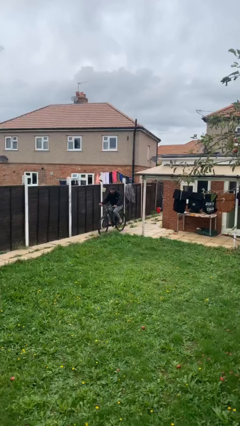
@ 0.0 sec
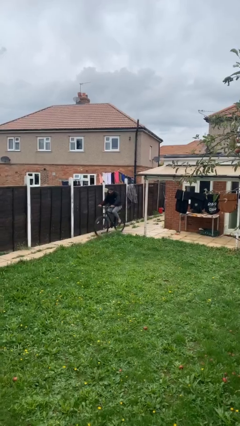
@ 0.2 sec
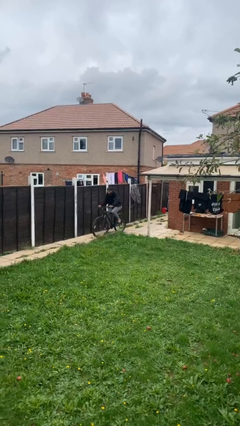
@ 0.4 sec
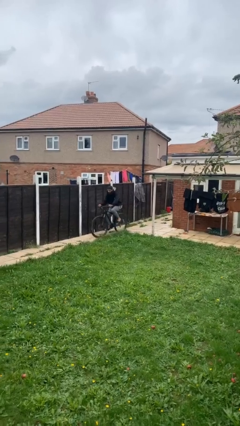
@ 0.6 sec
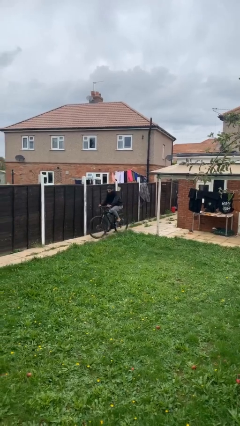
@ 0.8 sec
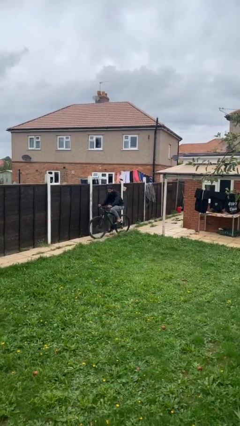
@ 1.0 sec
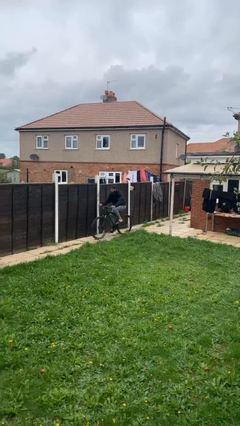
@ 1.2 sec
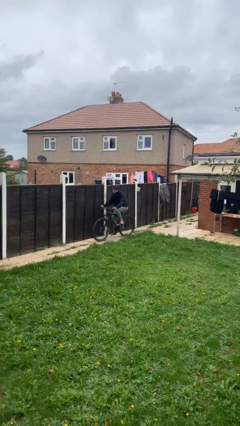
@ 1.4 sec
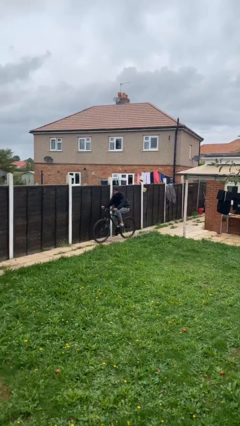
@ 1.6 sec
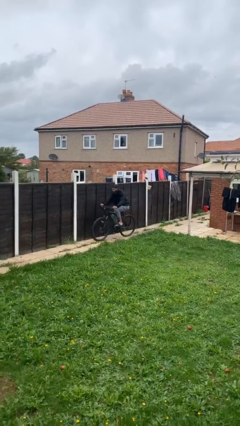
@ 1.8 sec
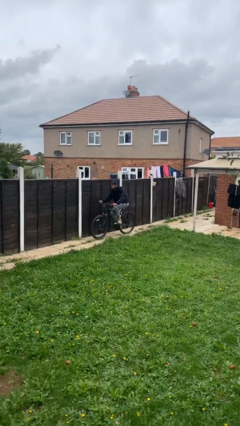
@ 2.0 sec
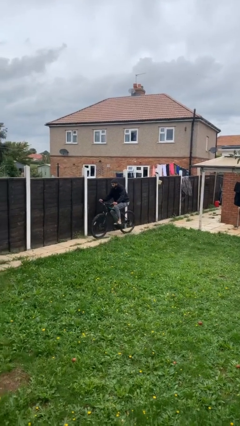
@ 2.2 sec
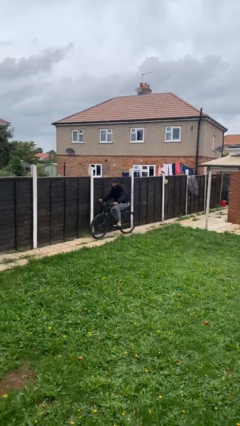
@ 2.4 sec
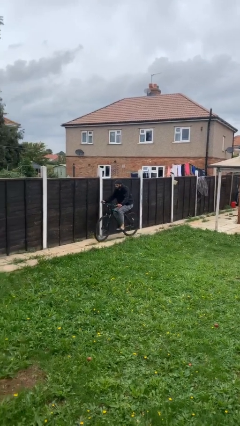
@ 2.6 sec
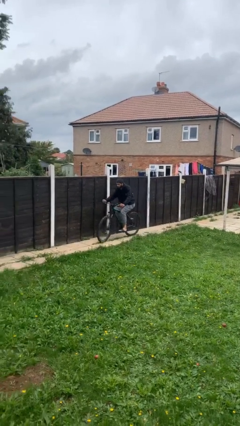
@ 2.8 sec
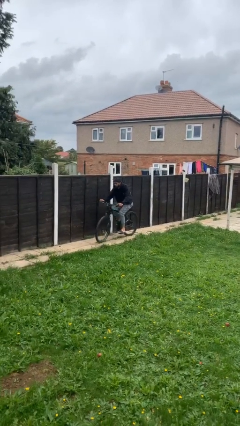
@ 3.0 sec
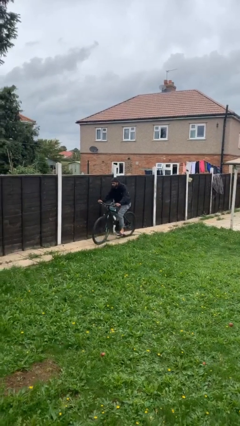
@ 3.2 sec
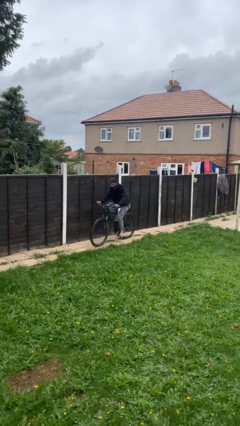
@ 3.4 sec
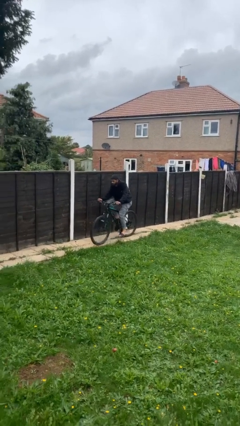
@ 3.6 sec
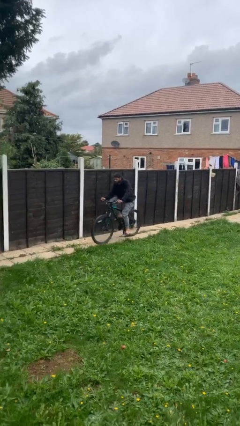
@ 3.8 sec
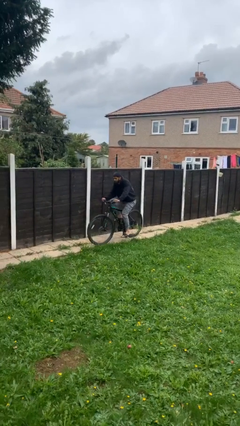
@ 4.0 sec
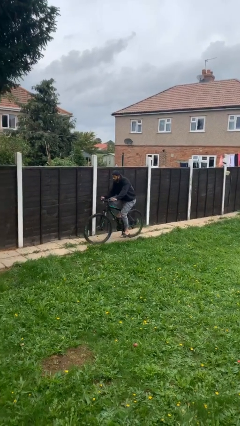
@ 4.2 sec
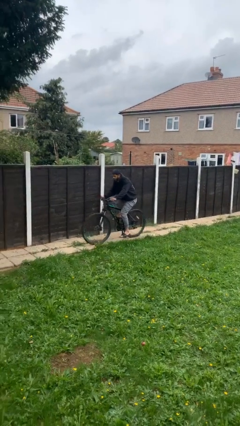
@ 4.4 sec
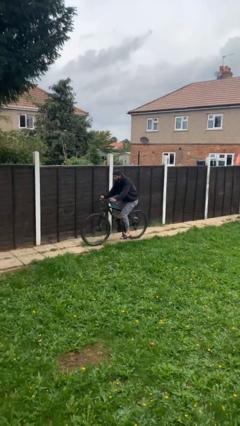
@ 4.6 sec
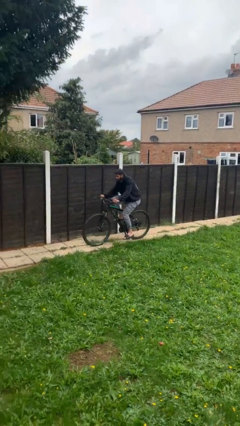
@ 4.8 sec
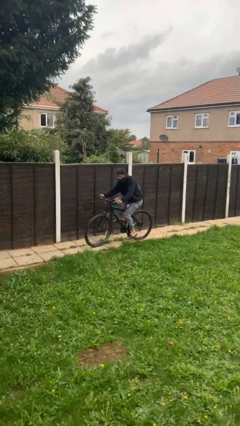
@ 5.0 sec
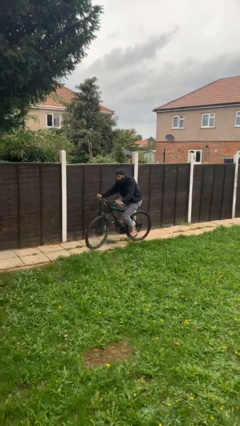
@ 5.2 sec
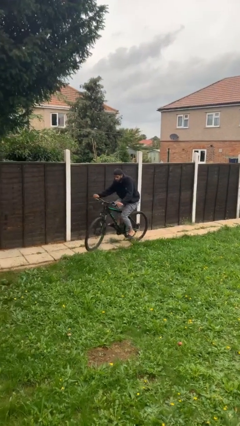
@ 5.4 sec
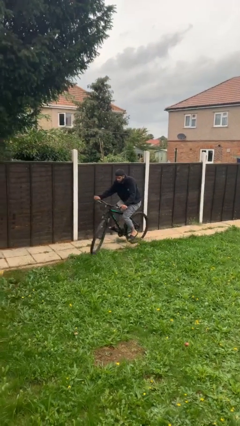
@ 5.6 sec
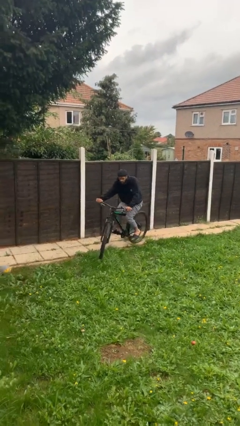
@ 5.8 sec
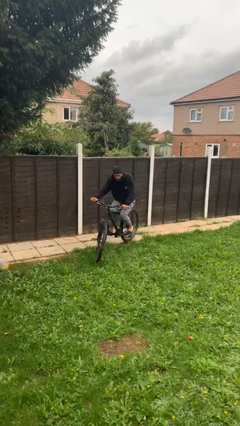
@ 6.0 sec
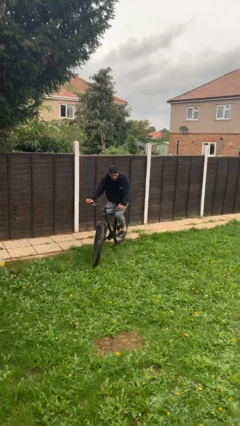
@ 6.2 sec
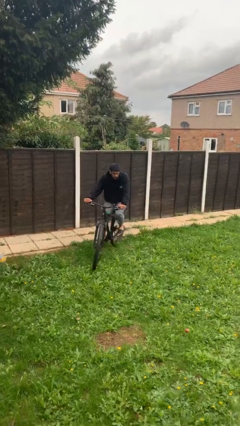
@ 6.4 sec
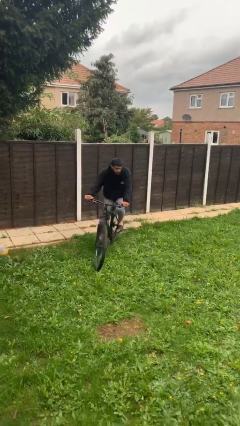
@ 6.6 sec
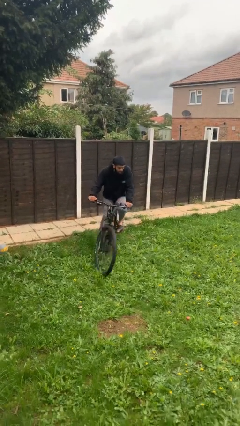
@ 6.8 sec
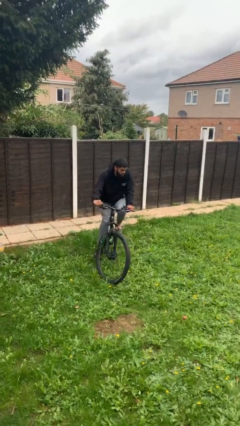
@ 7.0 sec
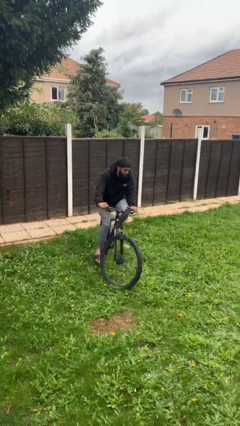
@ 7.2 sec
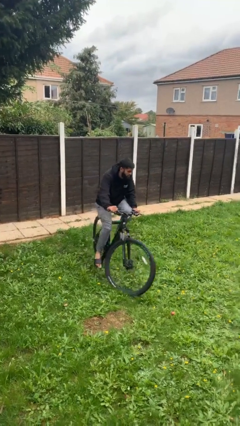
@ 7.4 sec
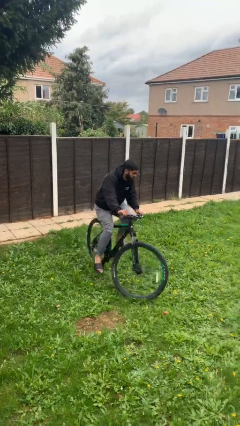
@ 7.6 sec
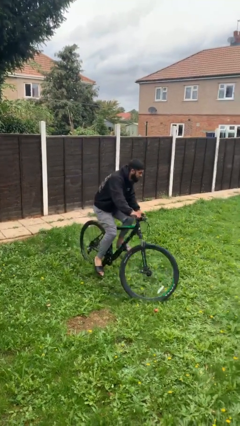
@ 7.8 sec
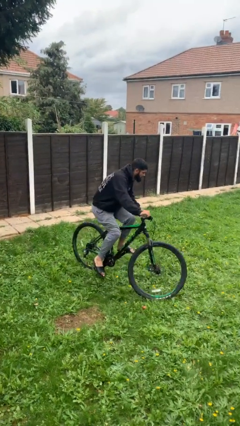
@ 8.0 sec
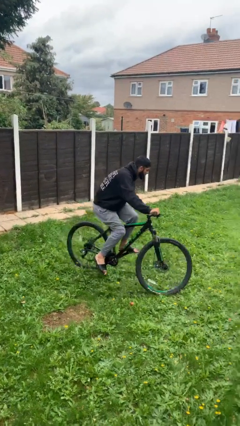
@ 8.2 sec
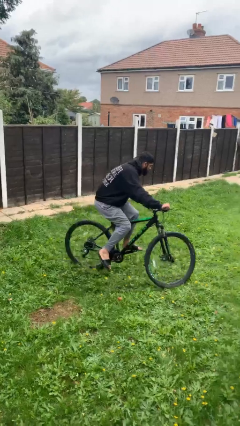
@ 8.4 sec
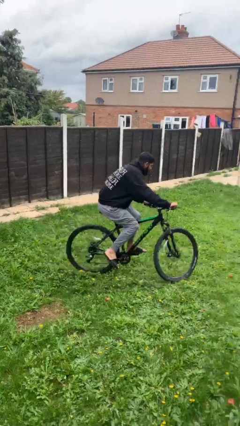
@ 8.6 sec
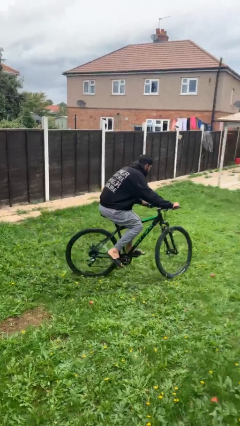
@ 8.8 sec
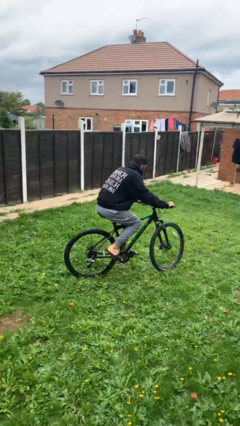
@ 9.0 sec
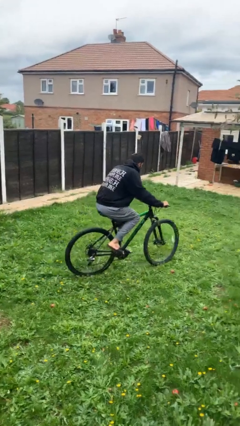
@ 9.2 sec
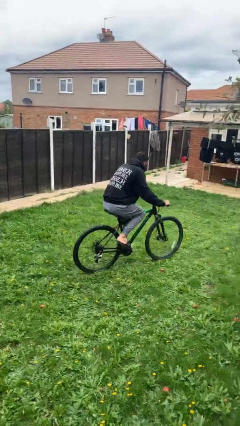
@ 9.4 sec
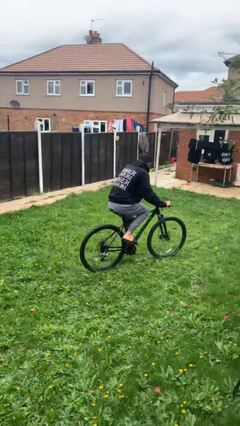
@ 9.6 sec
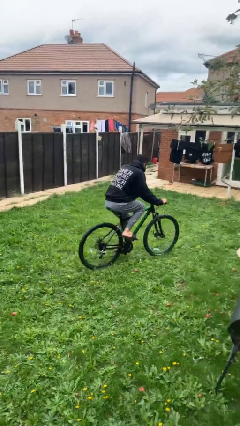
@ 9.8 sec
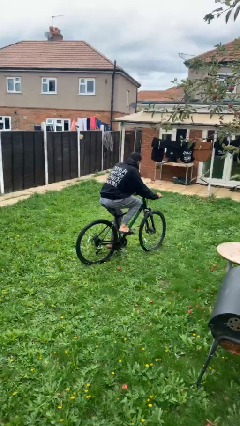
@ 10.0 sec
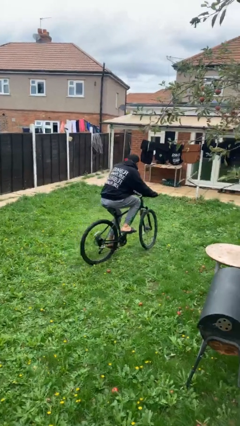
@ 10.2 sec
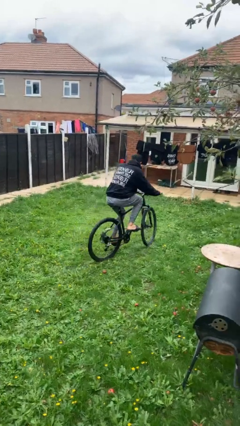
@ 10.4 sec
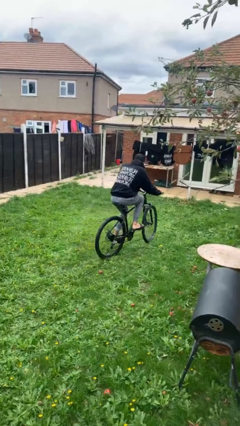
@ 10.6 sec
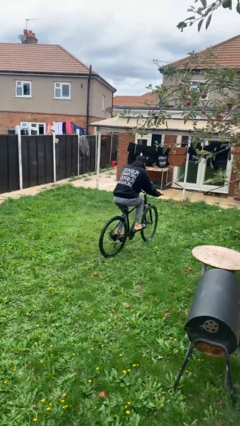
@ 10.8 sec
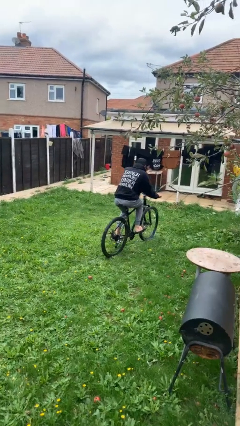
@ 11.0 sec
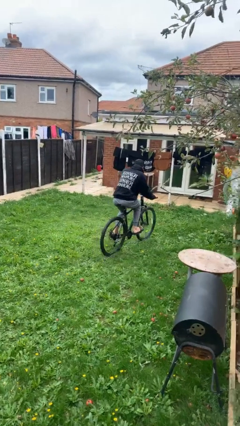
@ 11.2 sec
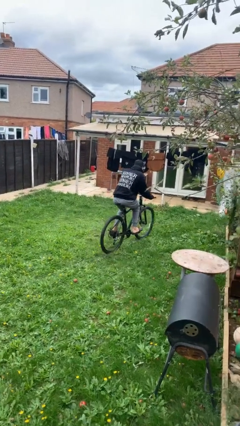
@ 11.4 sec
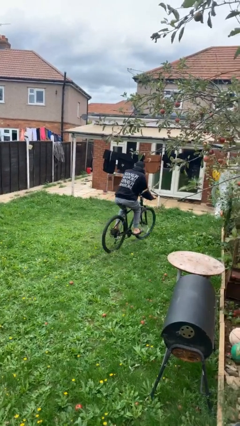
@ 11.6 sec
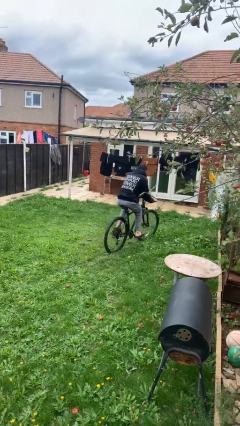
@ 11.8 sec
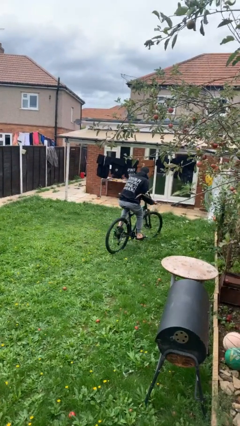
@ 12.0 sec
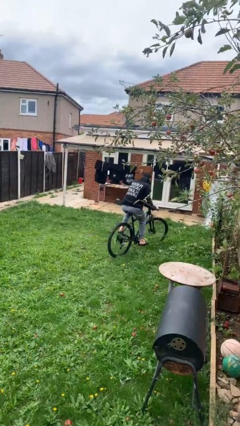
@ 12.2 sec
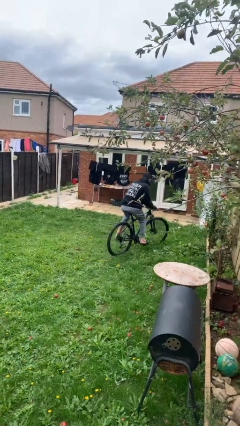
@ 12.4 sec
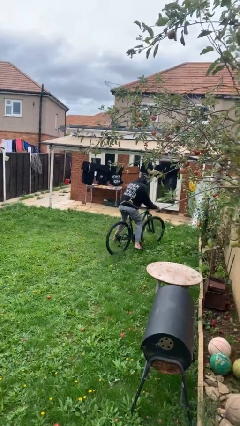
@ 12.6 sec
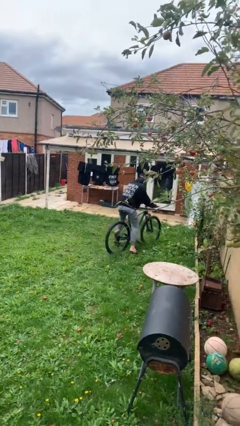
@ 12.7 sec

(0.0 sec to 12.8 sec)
person rides bicycle

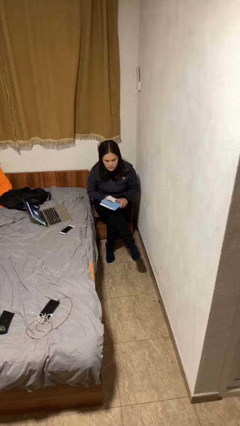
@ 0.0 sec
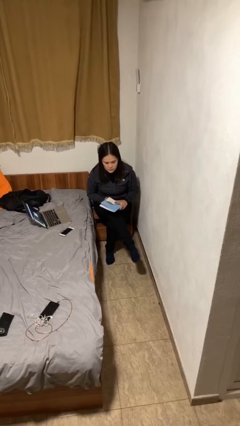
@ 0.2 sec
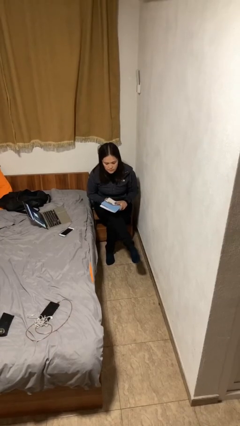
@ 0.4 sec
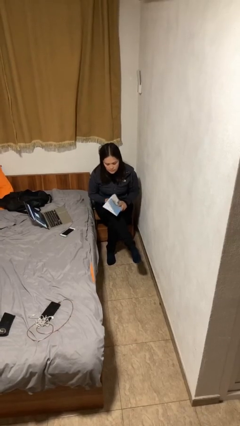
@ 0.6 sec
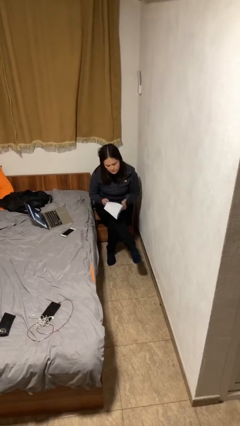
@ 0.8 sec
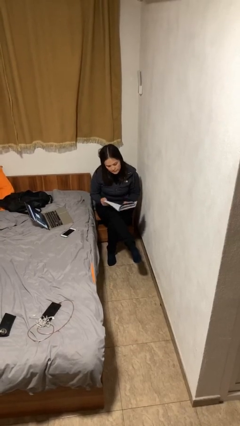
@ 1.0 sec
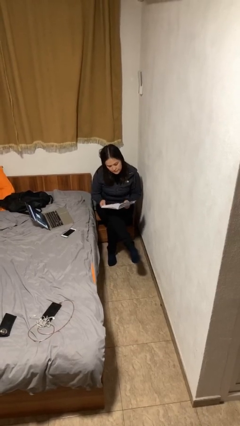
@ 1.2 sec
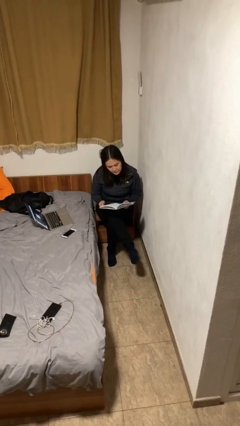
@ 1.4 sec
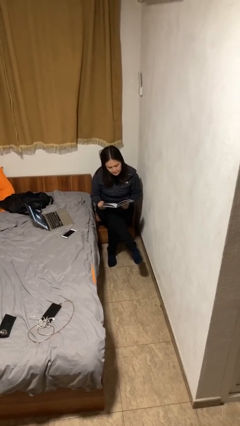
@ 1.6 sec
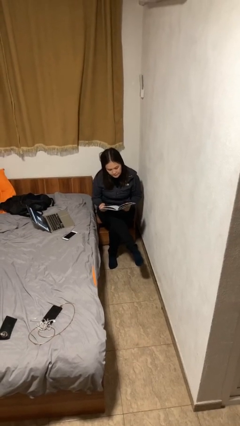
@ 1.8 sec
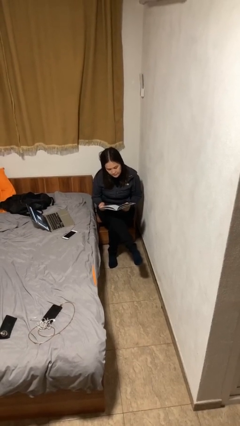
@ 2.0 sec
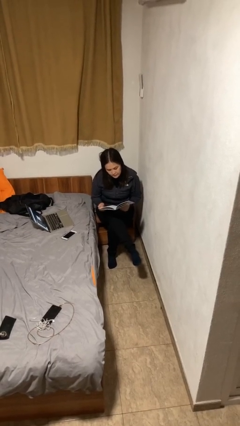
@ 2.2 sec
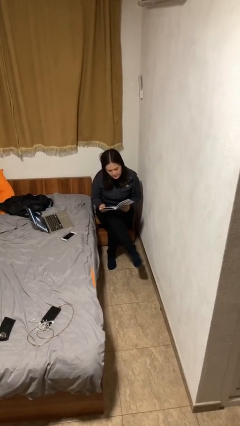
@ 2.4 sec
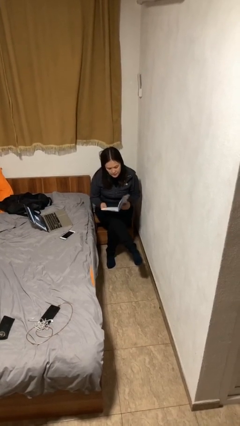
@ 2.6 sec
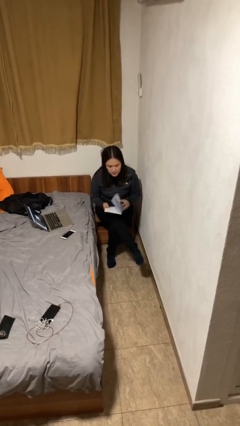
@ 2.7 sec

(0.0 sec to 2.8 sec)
person reads document

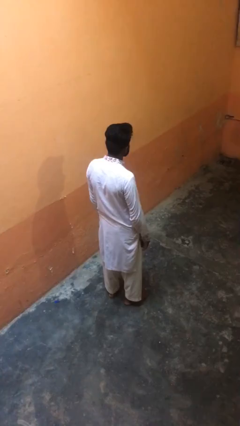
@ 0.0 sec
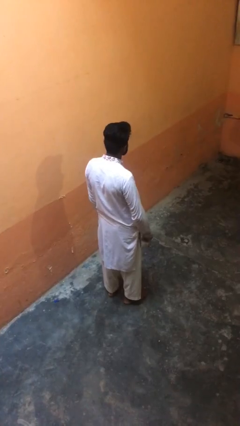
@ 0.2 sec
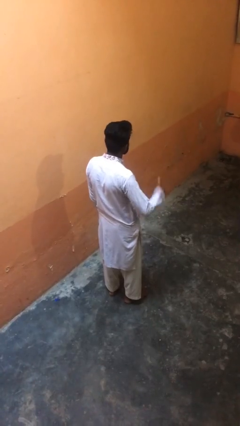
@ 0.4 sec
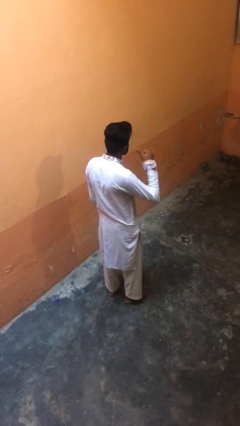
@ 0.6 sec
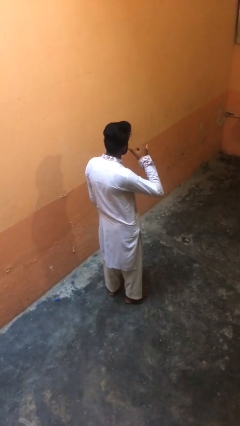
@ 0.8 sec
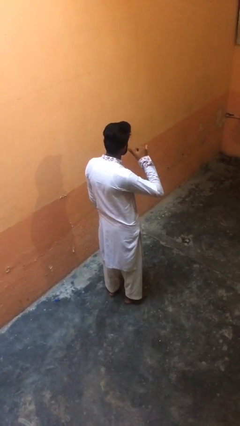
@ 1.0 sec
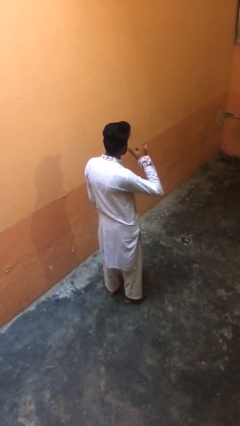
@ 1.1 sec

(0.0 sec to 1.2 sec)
person gestures call me

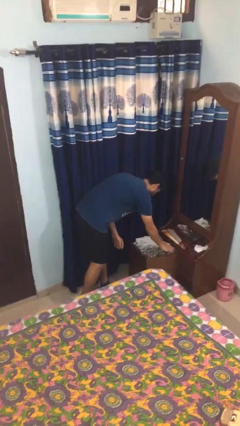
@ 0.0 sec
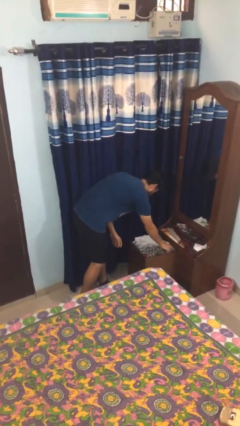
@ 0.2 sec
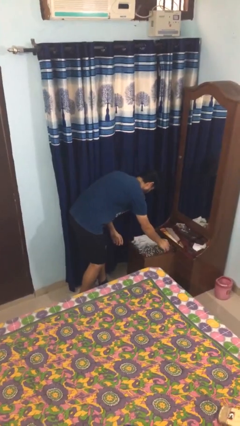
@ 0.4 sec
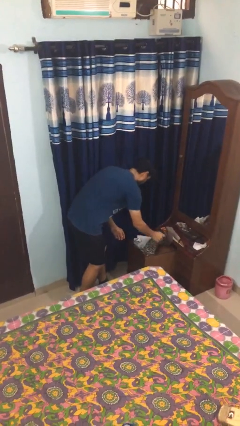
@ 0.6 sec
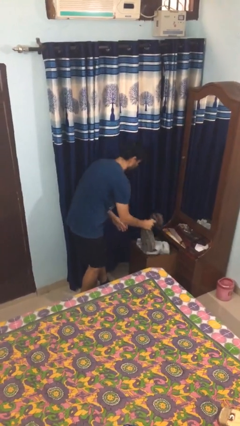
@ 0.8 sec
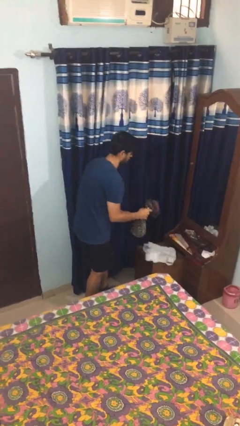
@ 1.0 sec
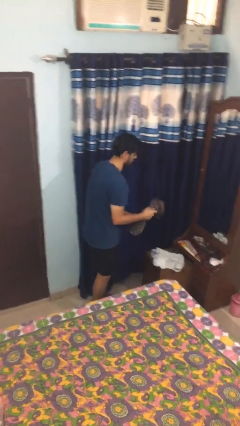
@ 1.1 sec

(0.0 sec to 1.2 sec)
person takes clothes from dresser
